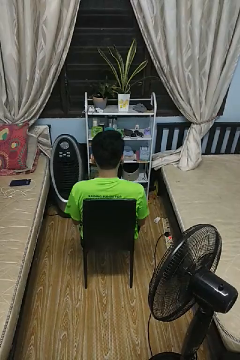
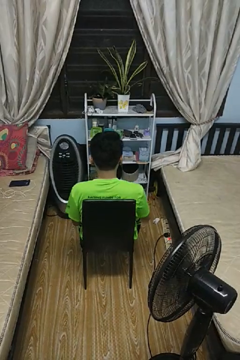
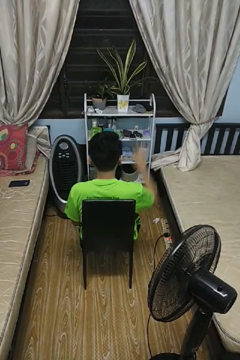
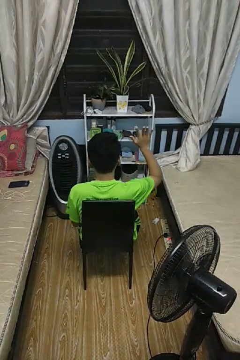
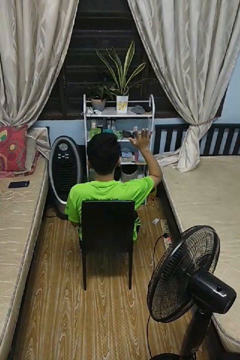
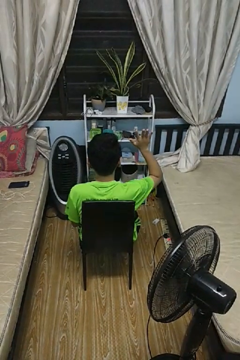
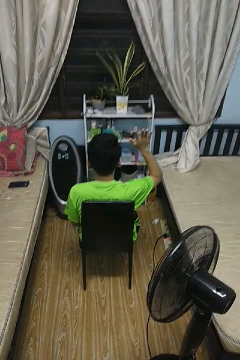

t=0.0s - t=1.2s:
person gestures number five

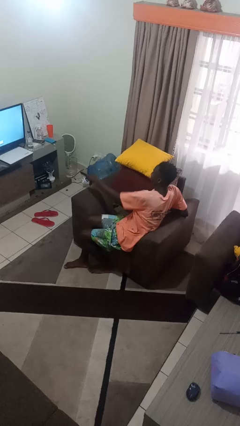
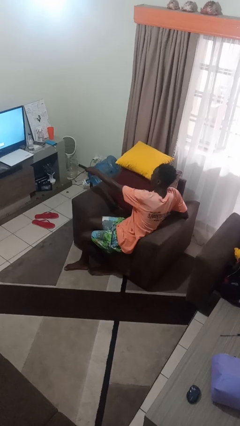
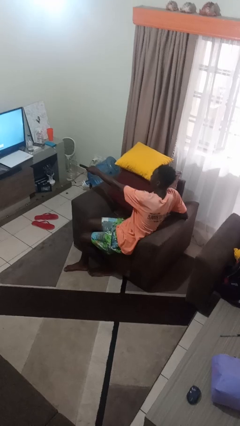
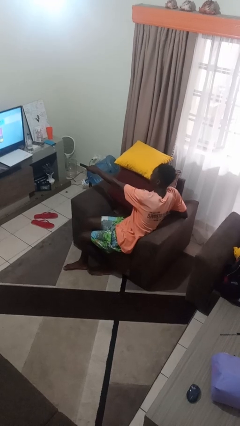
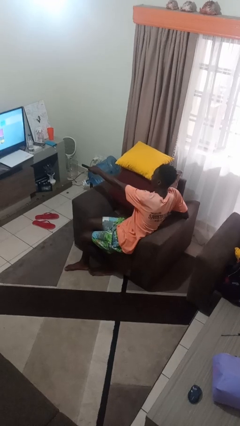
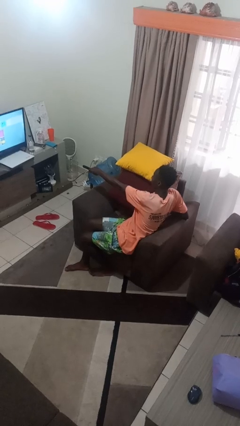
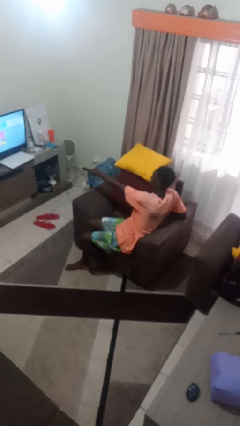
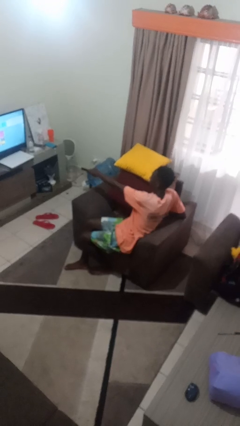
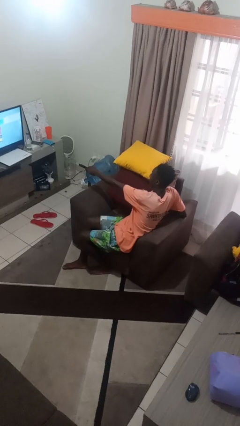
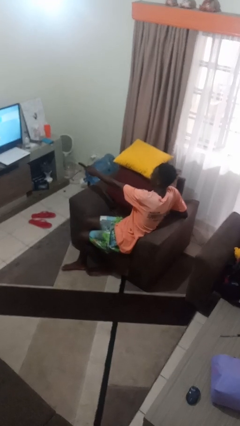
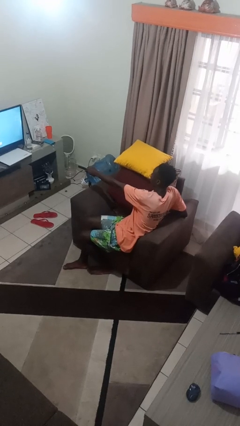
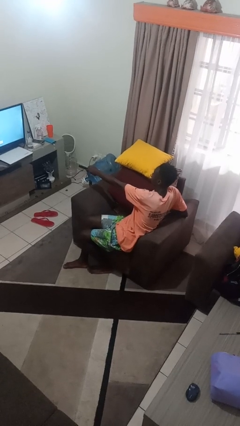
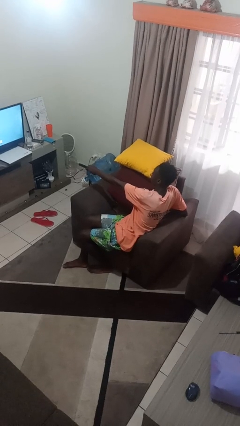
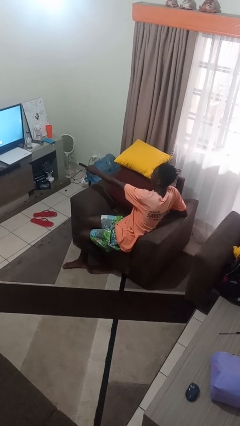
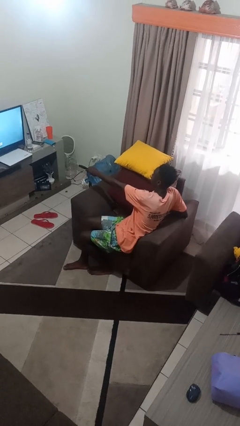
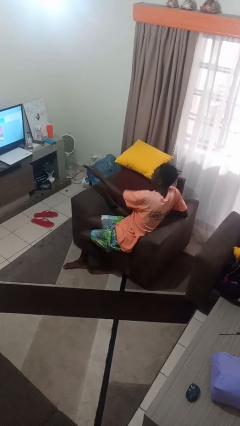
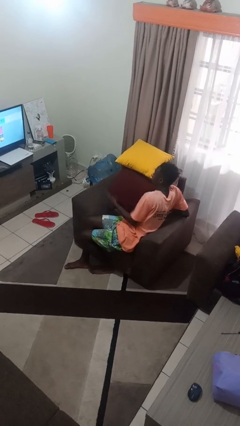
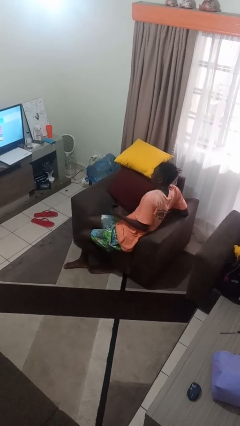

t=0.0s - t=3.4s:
person uses television remote

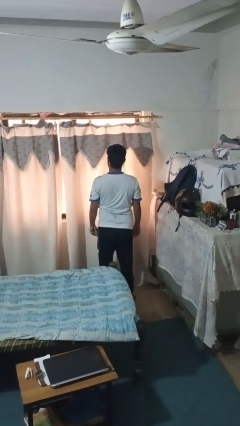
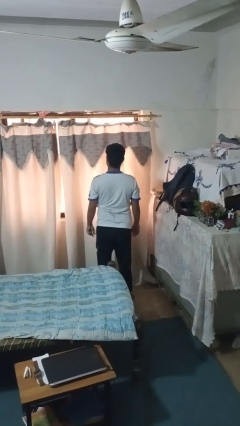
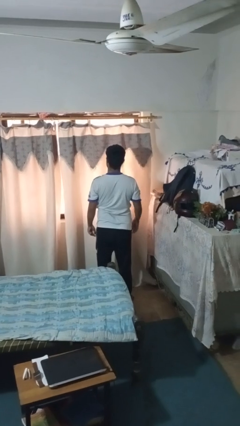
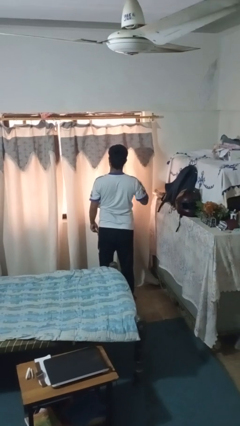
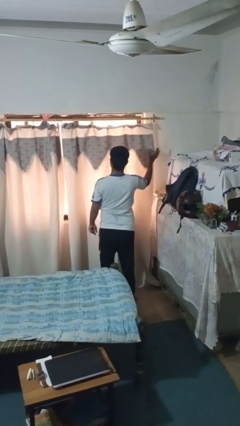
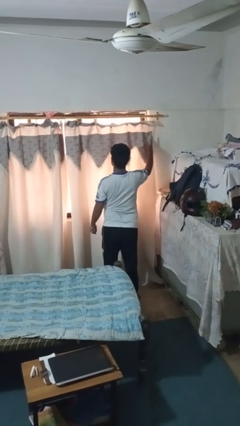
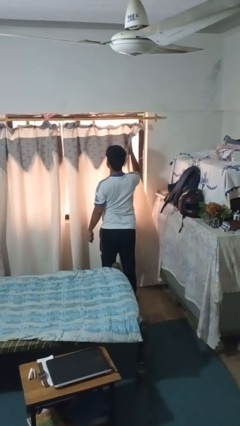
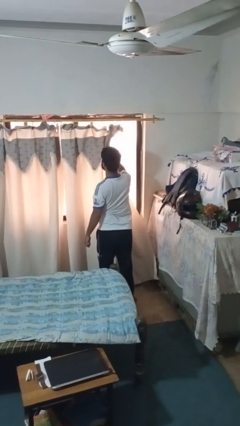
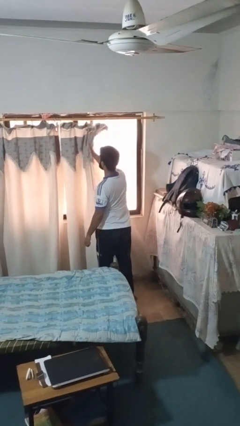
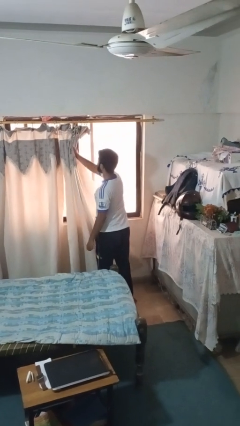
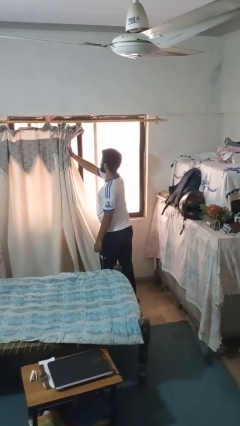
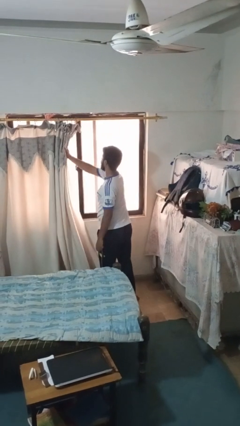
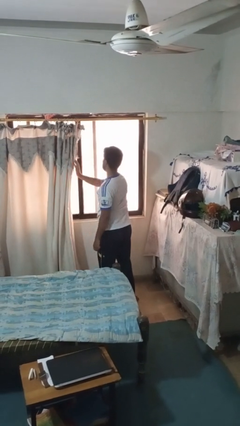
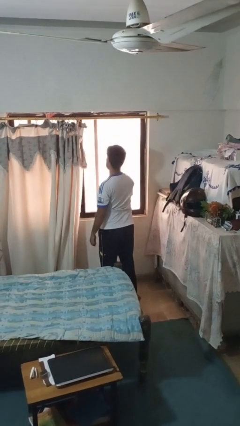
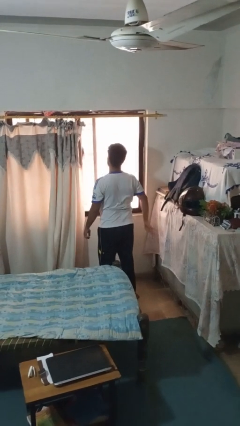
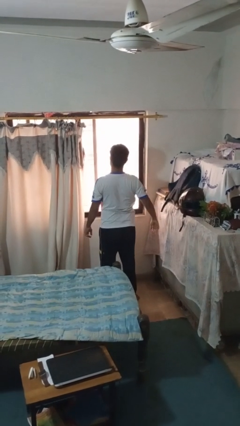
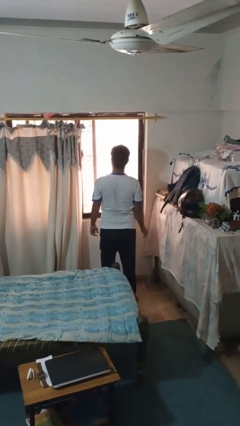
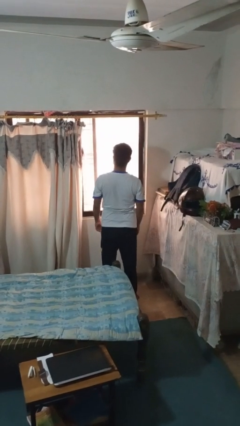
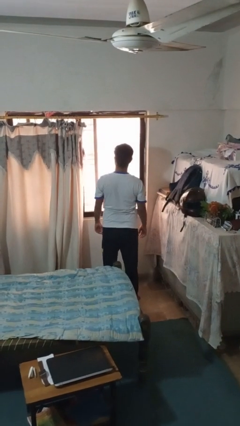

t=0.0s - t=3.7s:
person opens curtains

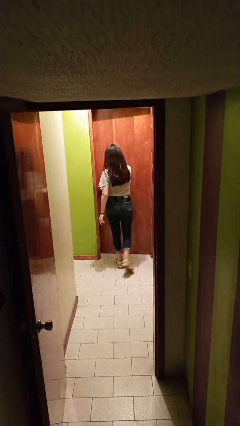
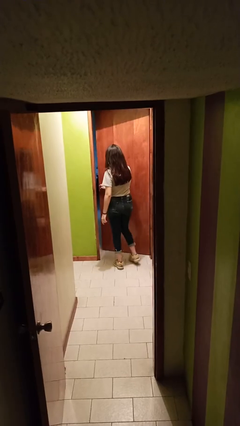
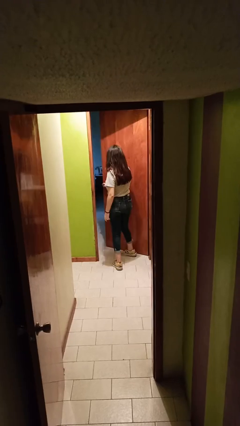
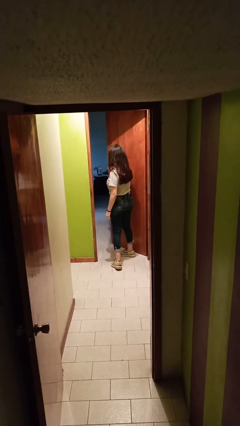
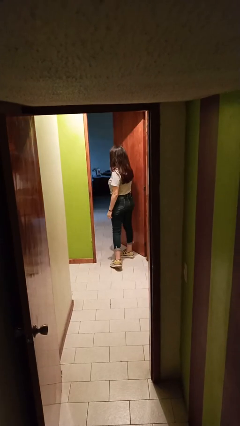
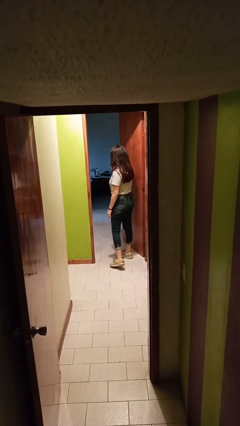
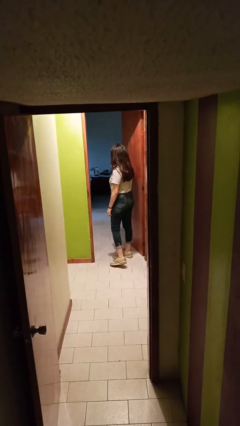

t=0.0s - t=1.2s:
person opens facility door

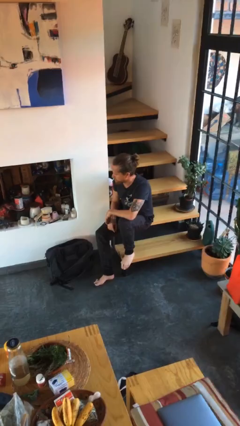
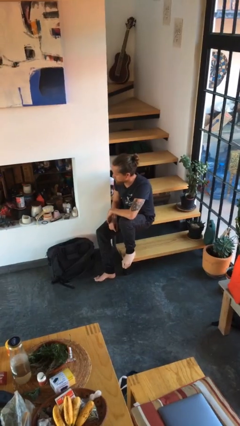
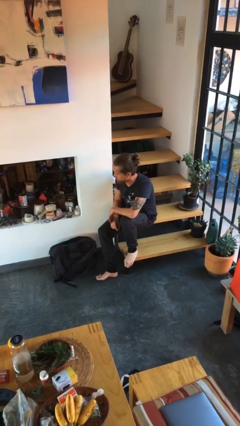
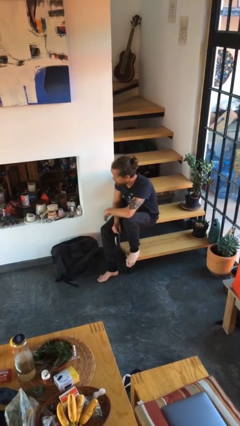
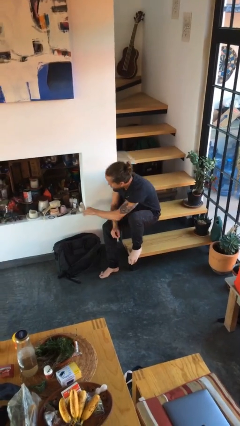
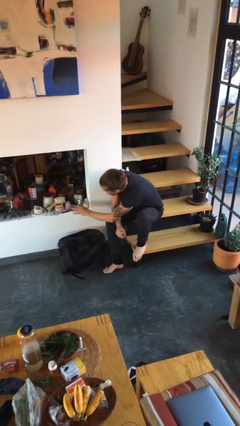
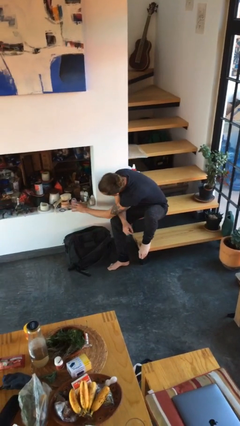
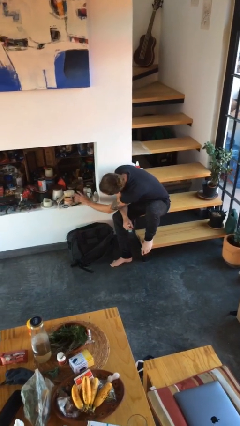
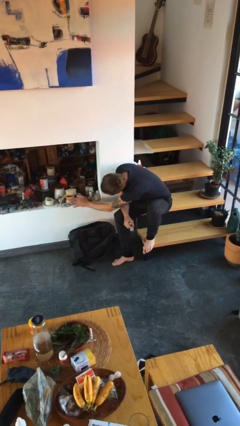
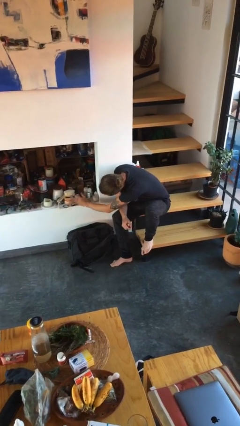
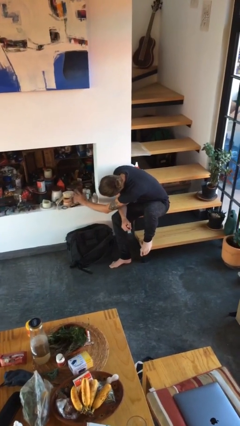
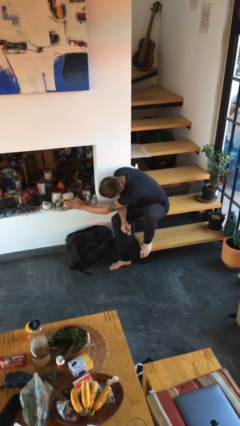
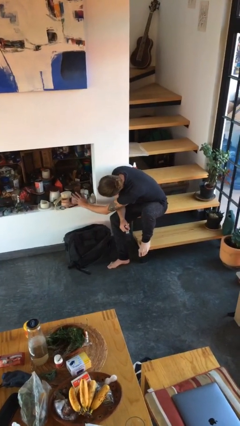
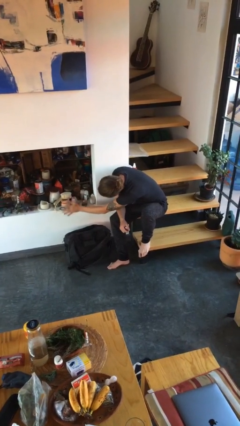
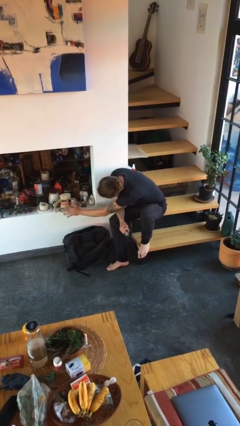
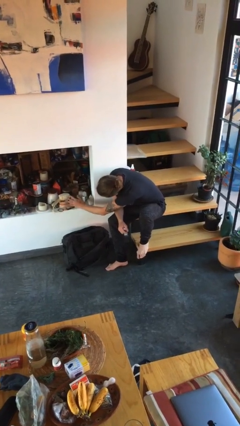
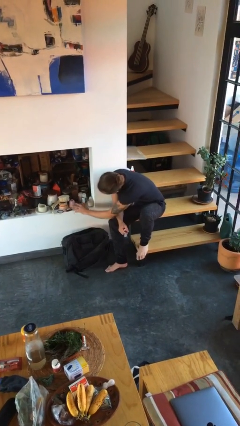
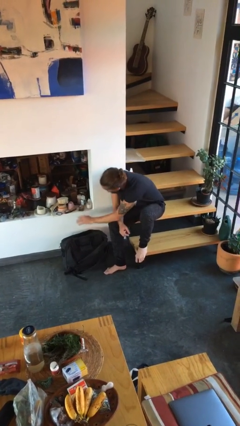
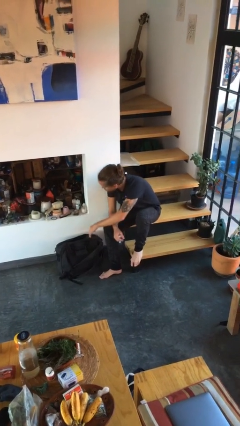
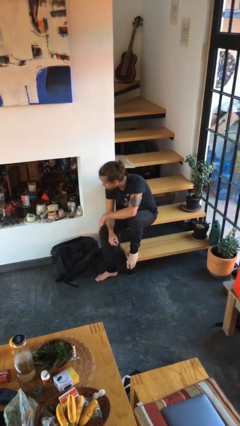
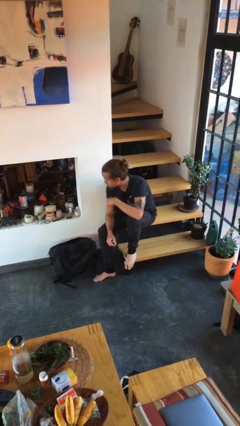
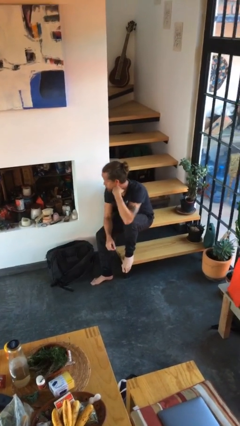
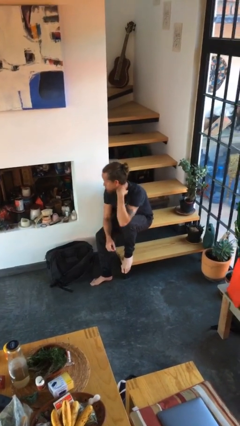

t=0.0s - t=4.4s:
person waves hand over object

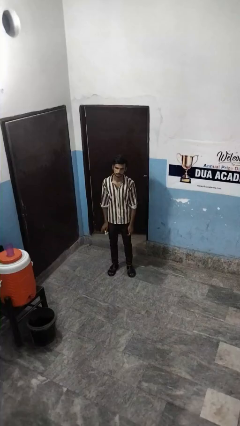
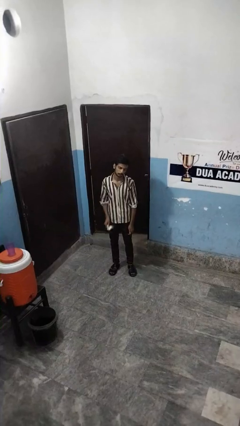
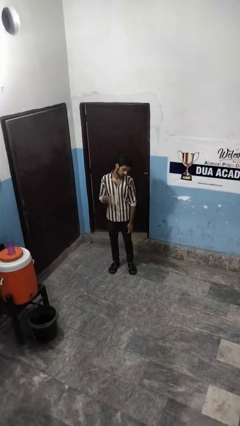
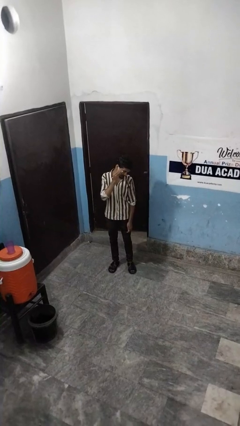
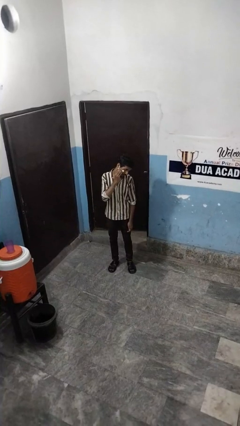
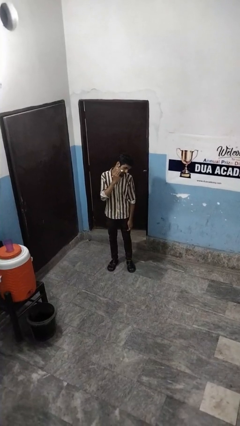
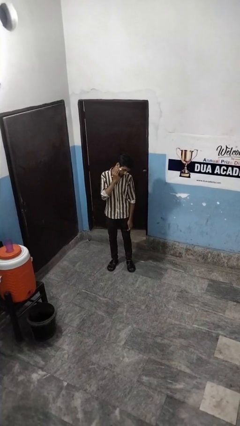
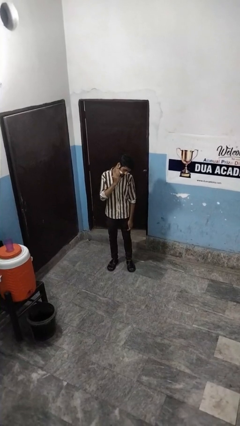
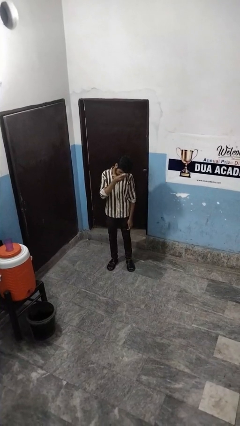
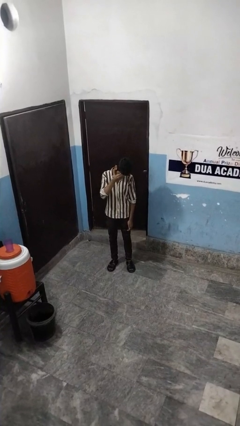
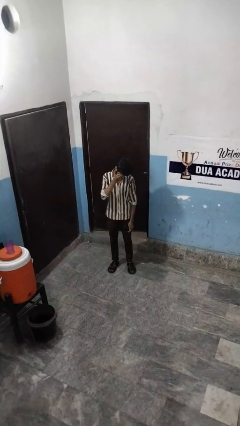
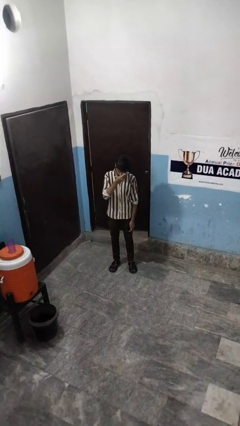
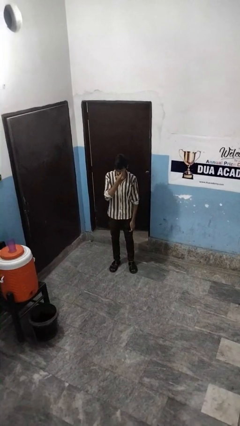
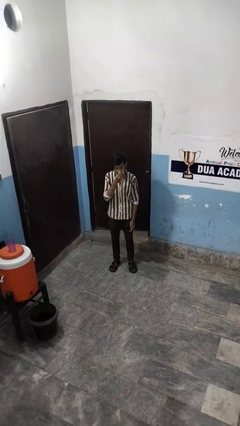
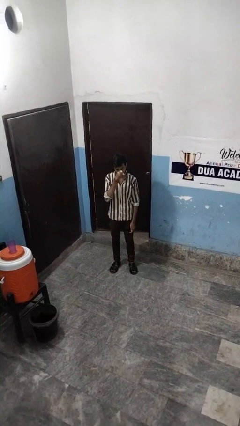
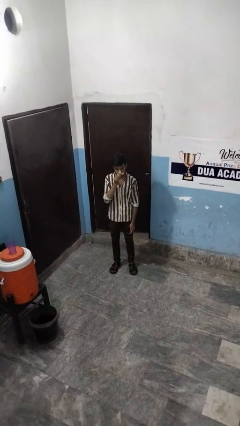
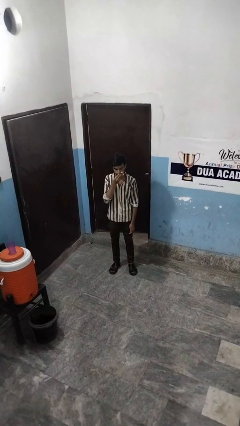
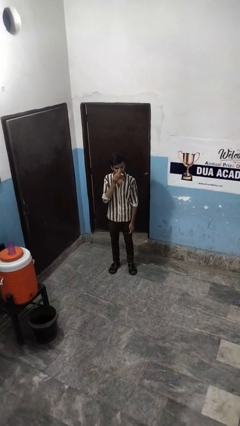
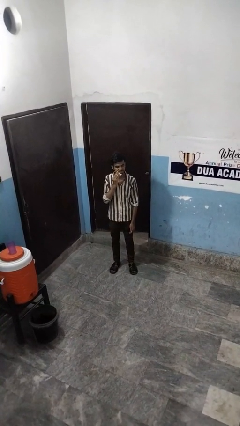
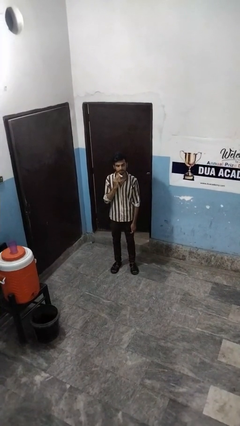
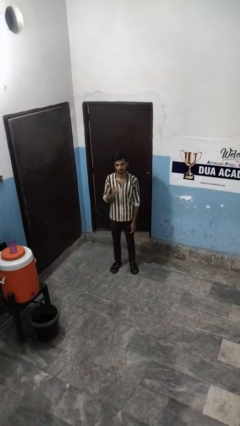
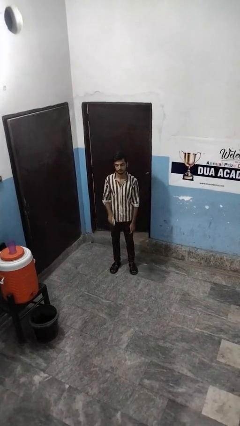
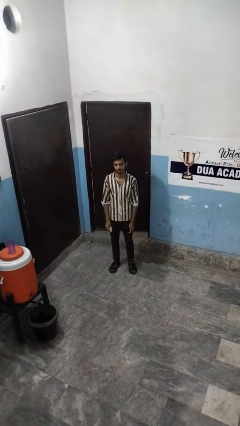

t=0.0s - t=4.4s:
person wipes mouth with napkin
